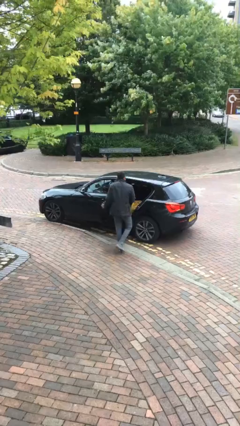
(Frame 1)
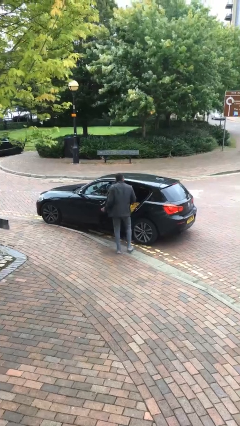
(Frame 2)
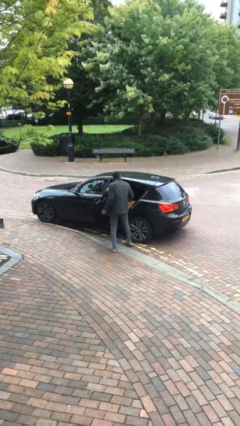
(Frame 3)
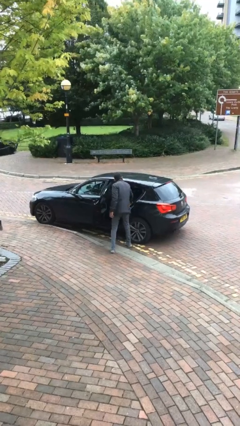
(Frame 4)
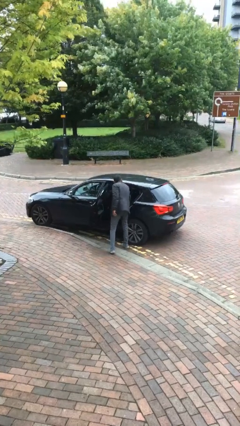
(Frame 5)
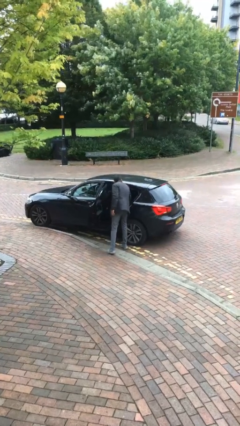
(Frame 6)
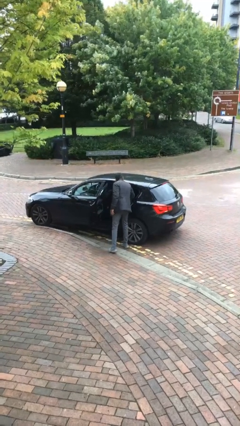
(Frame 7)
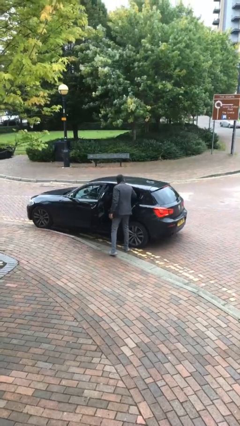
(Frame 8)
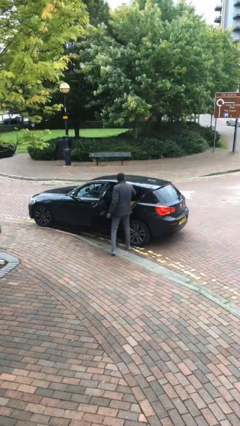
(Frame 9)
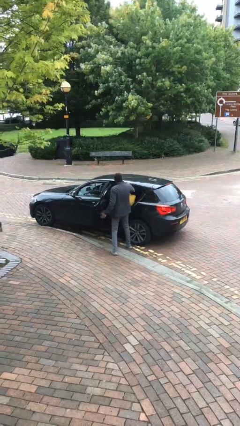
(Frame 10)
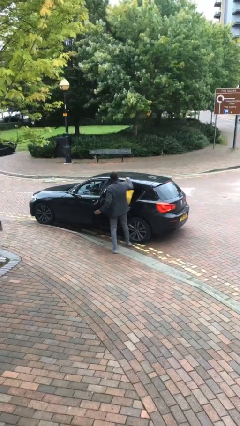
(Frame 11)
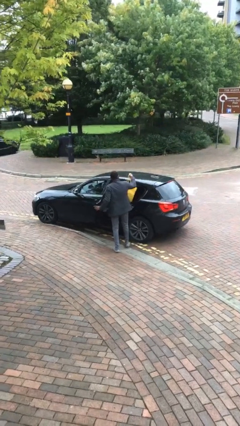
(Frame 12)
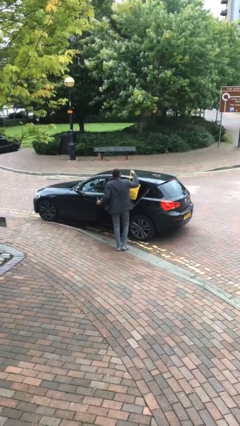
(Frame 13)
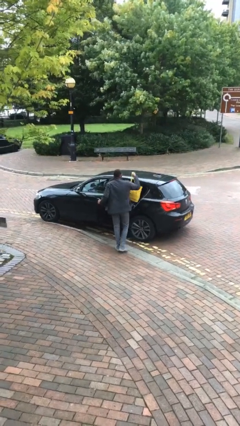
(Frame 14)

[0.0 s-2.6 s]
person unloads car

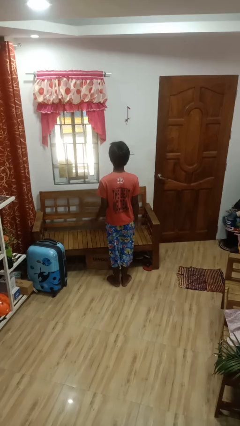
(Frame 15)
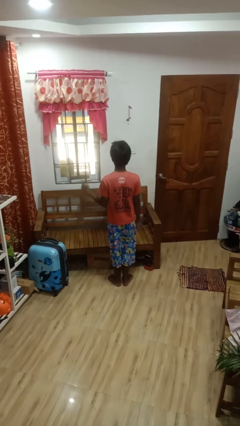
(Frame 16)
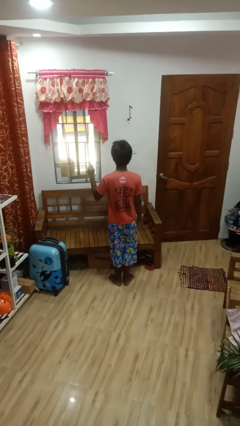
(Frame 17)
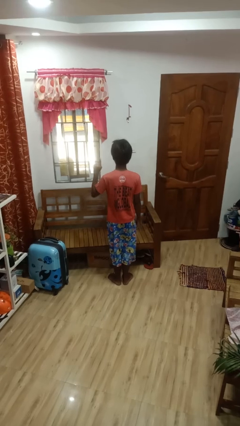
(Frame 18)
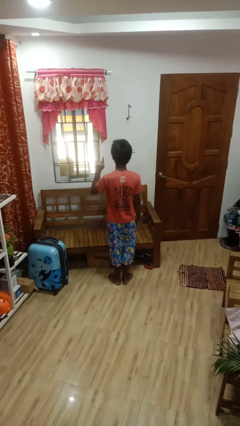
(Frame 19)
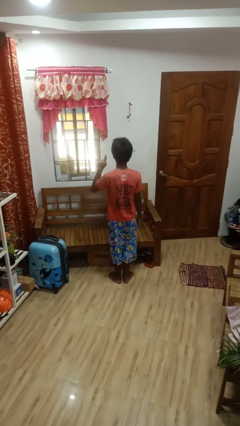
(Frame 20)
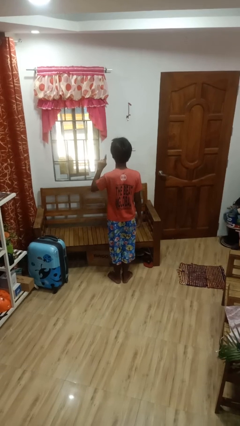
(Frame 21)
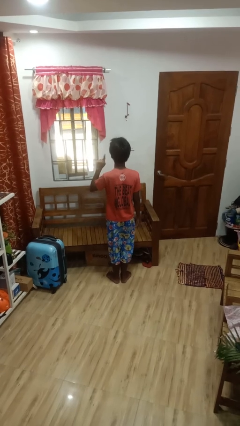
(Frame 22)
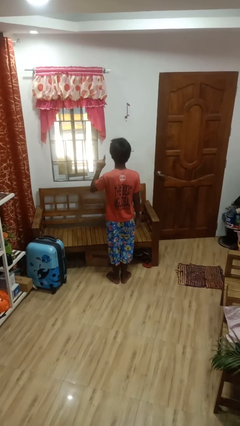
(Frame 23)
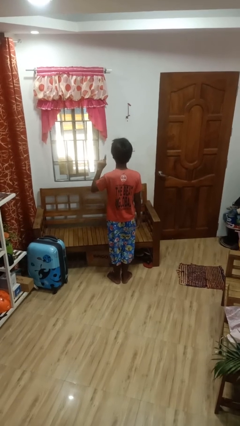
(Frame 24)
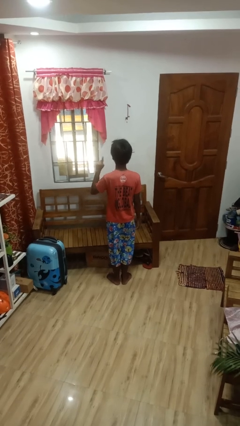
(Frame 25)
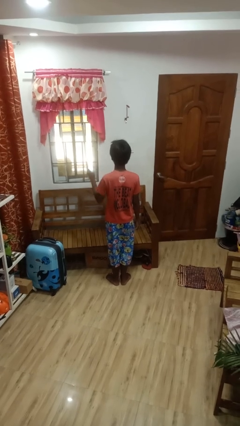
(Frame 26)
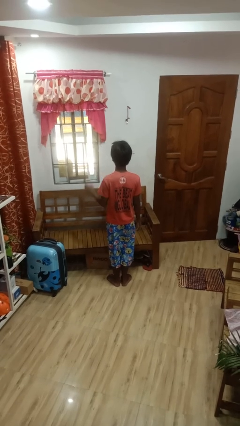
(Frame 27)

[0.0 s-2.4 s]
person gestures number one

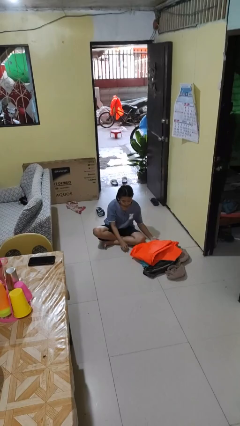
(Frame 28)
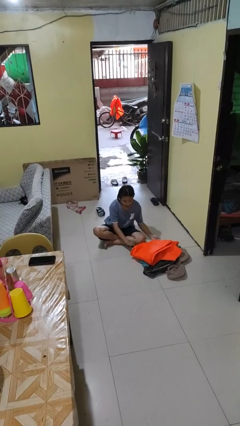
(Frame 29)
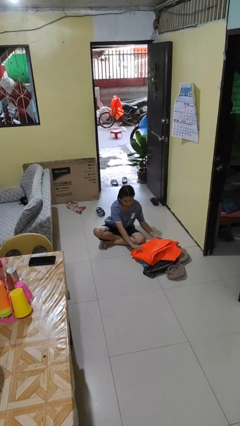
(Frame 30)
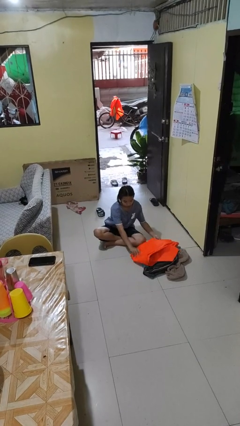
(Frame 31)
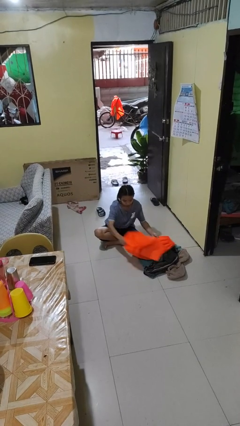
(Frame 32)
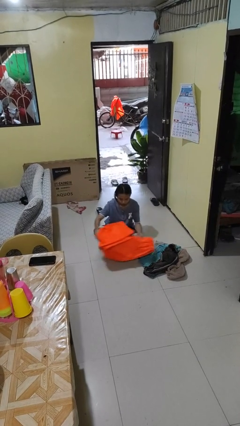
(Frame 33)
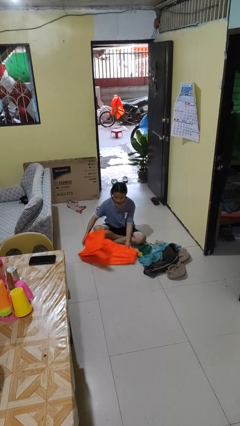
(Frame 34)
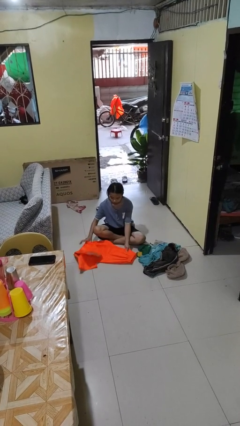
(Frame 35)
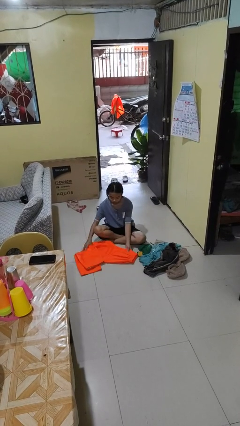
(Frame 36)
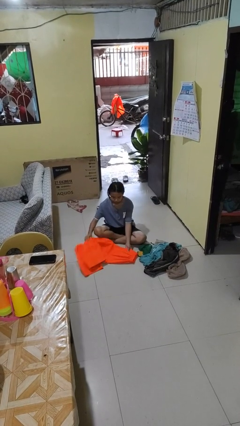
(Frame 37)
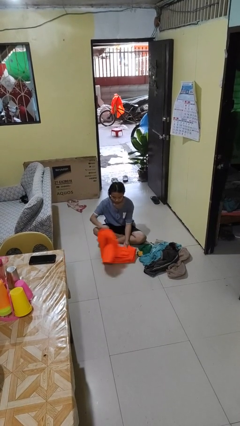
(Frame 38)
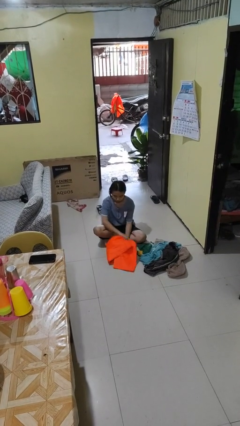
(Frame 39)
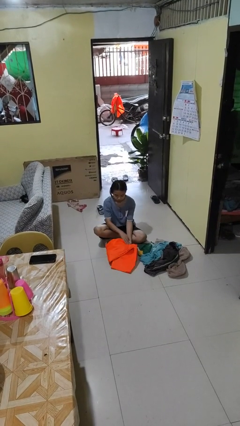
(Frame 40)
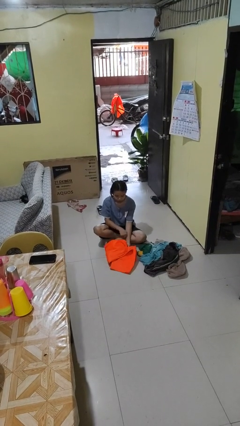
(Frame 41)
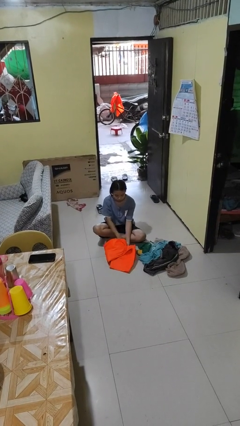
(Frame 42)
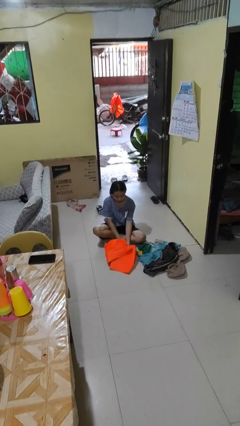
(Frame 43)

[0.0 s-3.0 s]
person folds pants

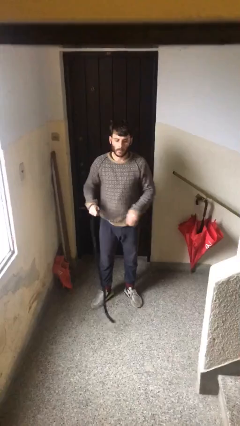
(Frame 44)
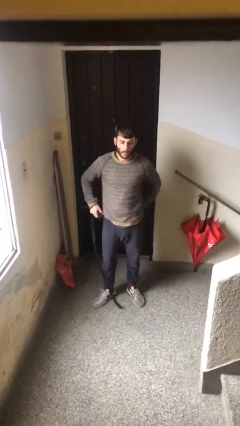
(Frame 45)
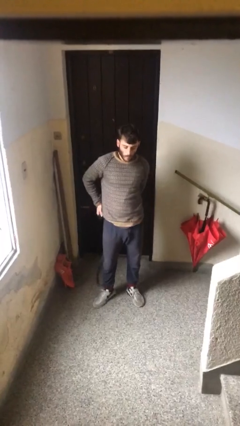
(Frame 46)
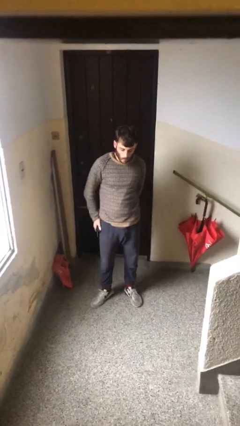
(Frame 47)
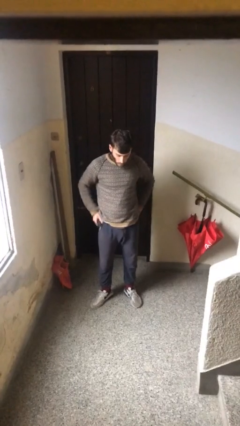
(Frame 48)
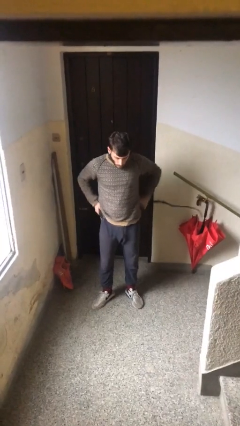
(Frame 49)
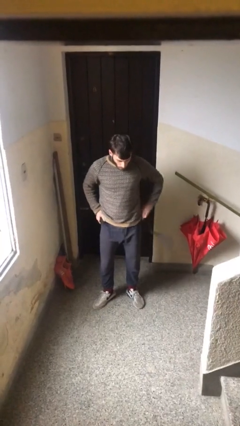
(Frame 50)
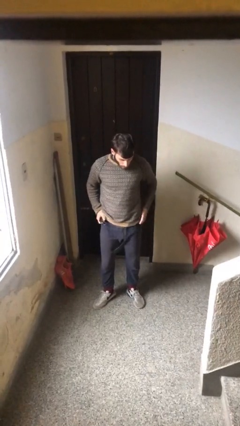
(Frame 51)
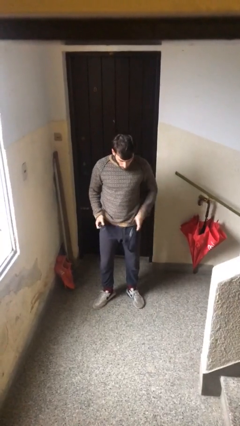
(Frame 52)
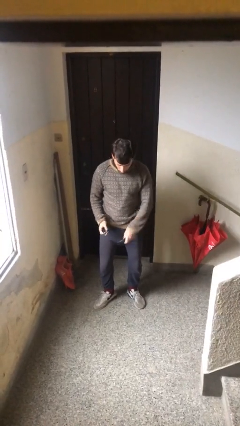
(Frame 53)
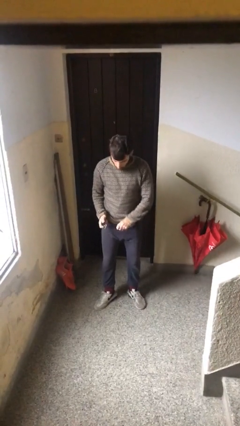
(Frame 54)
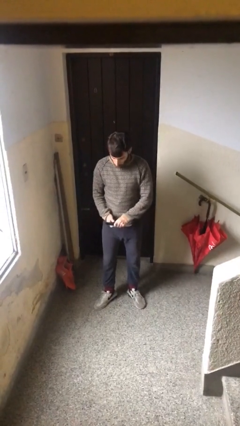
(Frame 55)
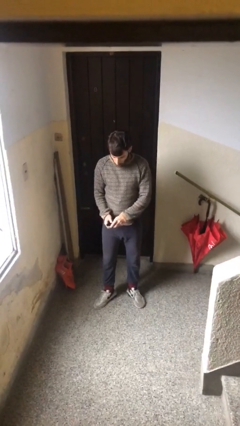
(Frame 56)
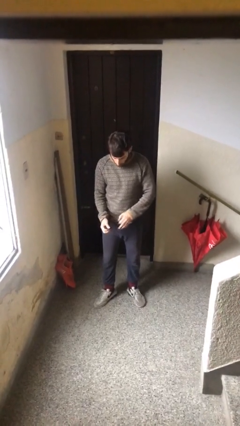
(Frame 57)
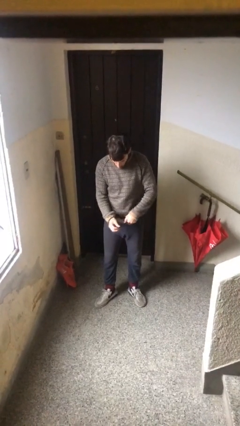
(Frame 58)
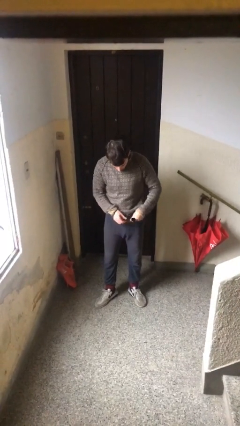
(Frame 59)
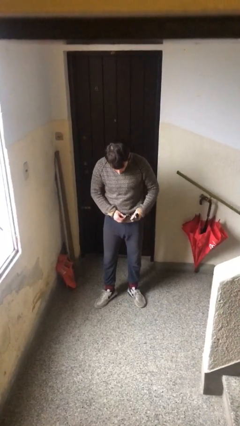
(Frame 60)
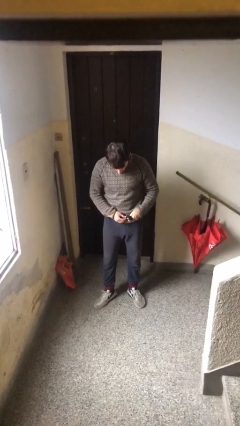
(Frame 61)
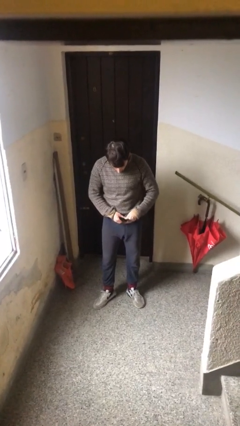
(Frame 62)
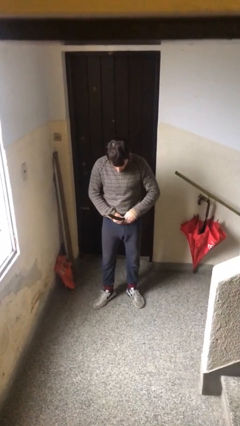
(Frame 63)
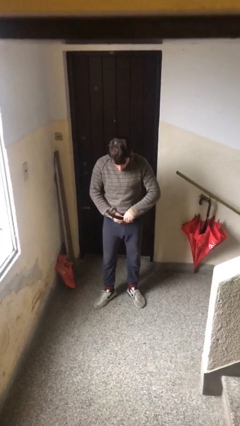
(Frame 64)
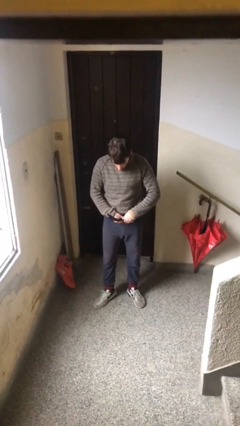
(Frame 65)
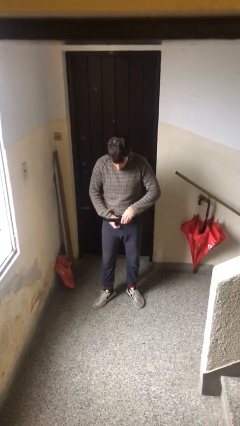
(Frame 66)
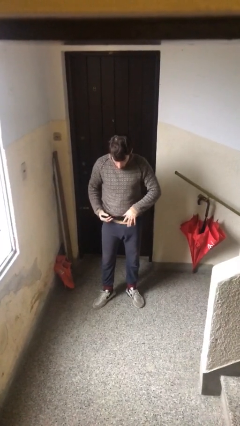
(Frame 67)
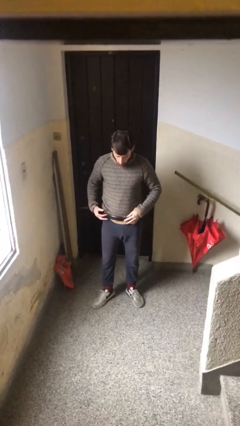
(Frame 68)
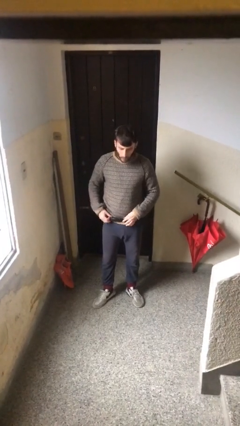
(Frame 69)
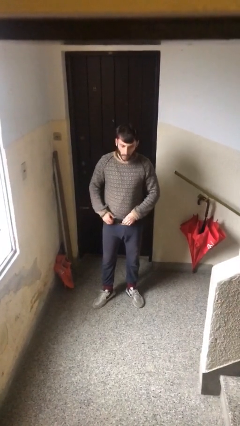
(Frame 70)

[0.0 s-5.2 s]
person puts on belt

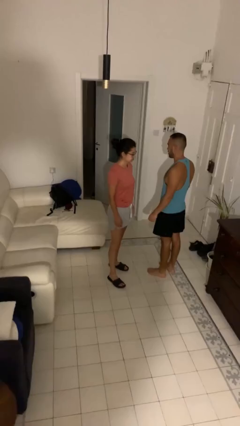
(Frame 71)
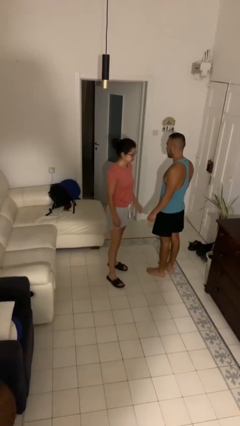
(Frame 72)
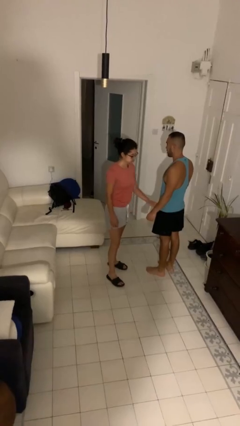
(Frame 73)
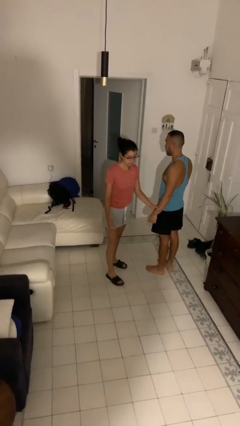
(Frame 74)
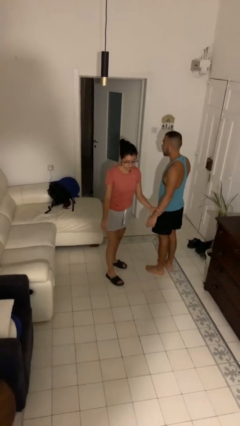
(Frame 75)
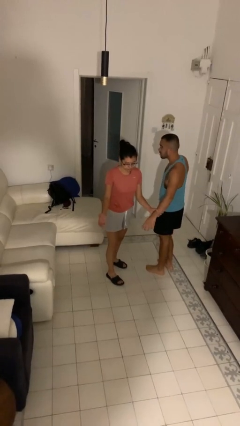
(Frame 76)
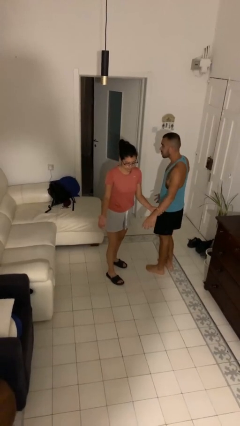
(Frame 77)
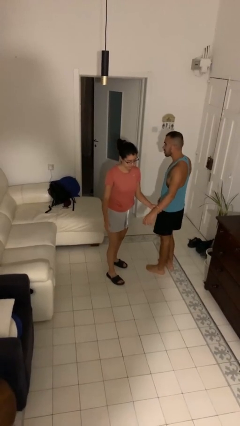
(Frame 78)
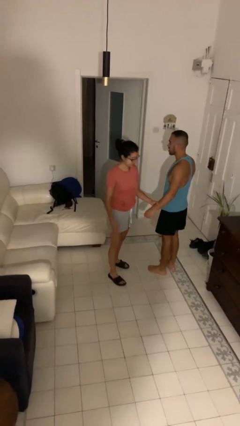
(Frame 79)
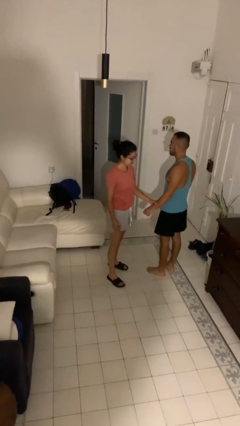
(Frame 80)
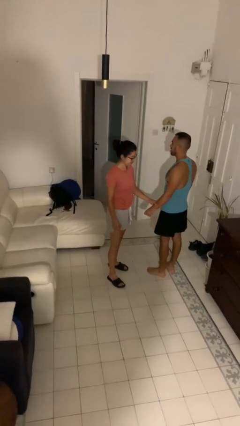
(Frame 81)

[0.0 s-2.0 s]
person grabs person by forearm

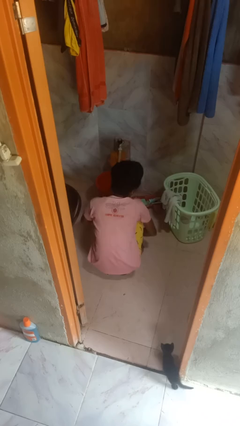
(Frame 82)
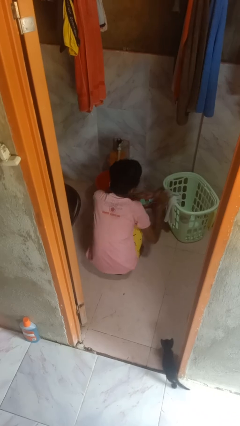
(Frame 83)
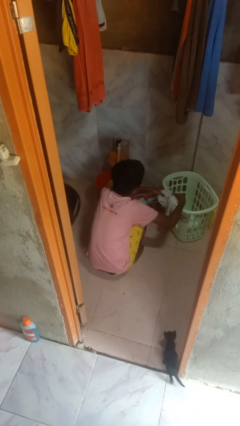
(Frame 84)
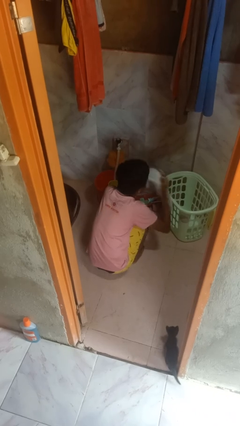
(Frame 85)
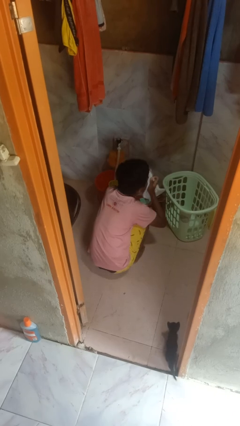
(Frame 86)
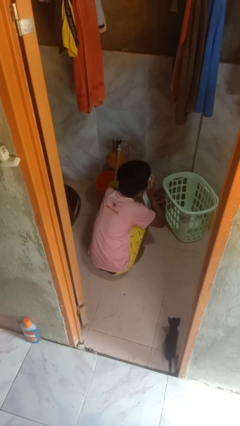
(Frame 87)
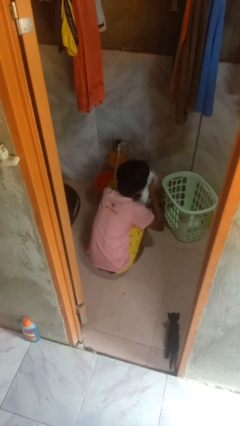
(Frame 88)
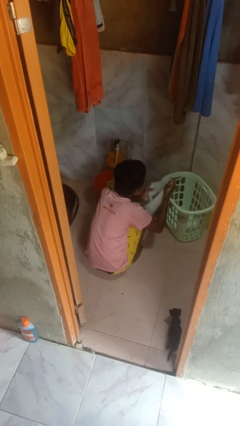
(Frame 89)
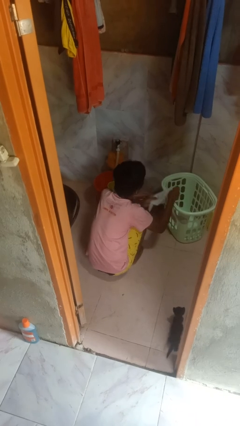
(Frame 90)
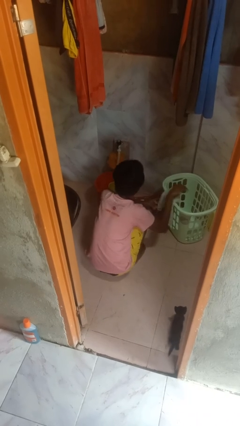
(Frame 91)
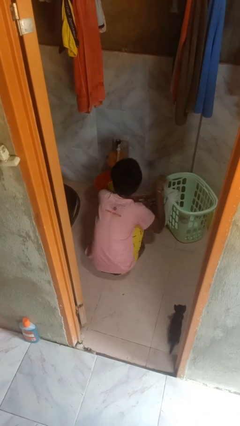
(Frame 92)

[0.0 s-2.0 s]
person dries face with towel
